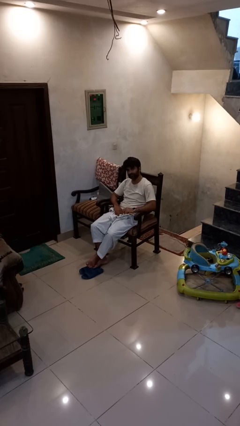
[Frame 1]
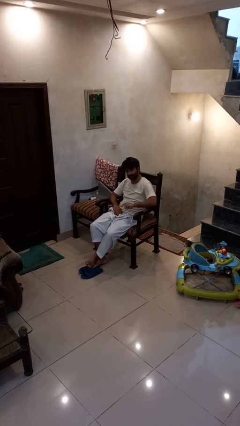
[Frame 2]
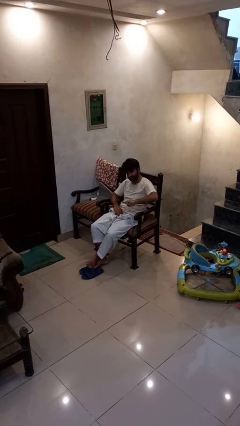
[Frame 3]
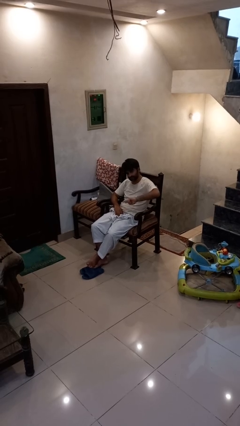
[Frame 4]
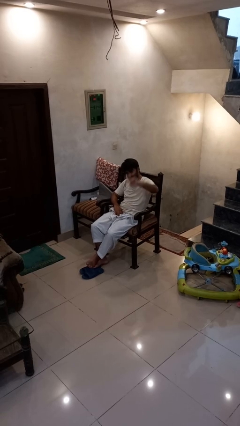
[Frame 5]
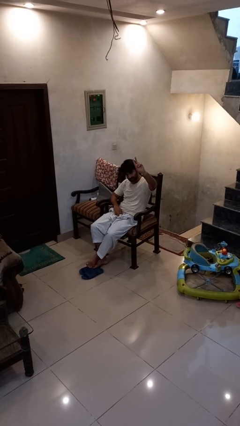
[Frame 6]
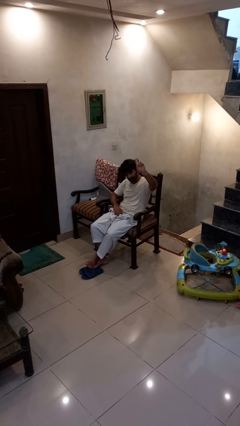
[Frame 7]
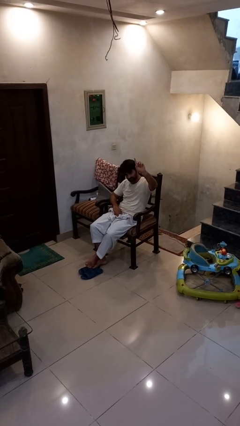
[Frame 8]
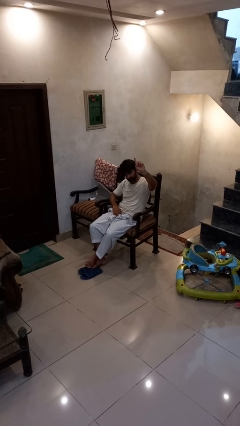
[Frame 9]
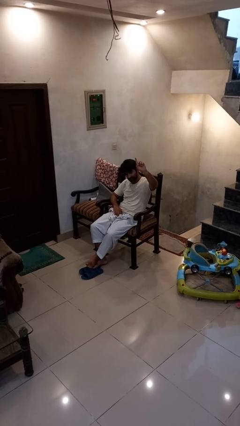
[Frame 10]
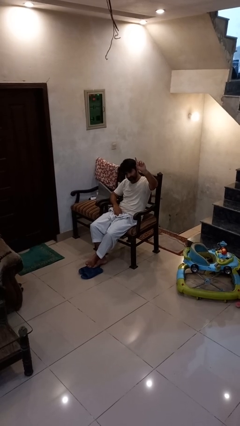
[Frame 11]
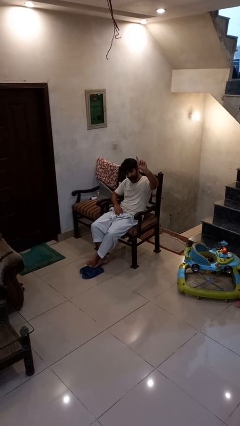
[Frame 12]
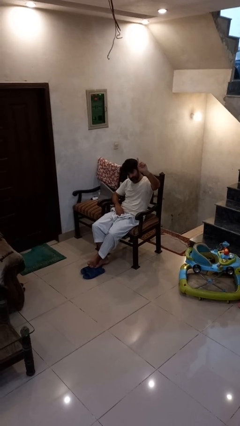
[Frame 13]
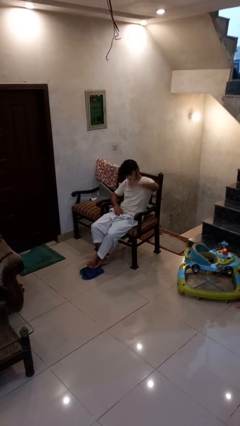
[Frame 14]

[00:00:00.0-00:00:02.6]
person gestures swipe up

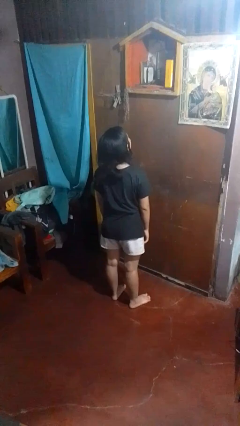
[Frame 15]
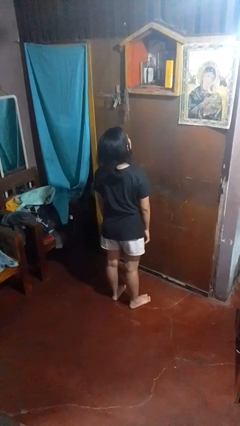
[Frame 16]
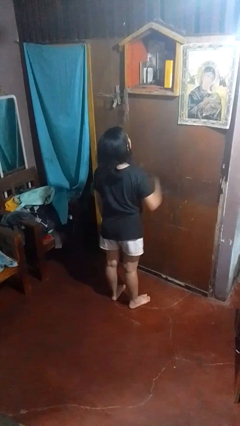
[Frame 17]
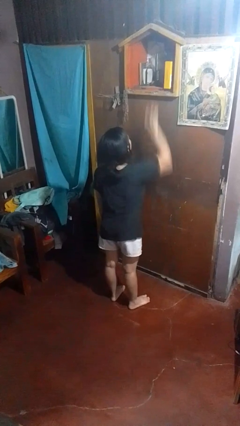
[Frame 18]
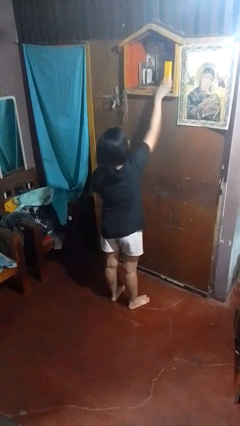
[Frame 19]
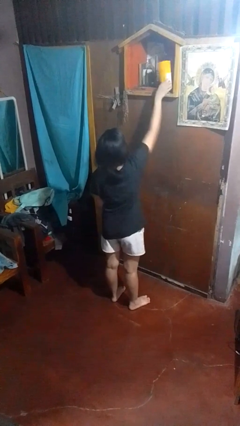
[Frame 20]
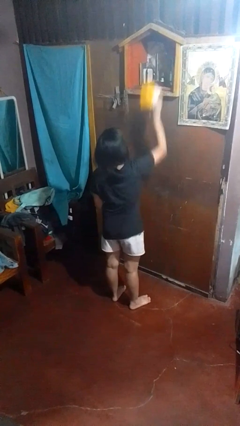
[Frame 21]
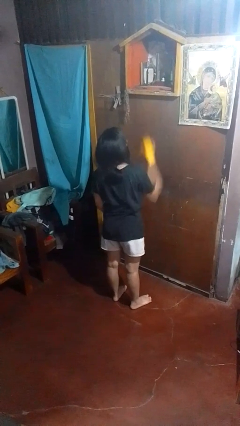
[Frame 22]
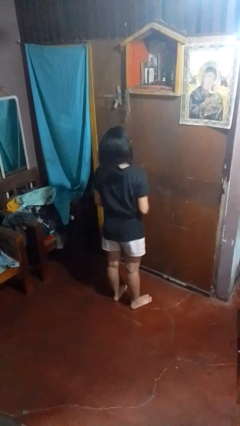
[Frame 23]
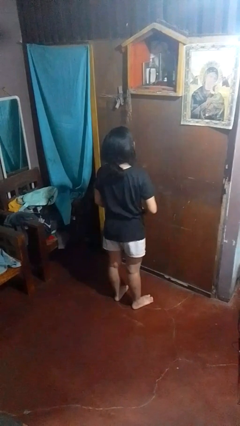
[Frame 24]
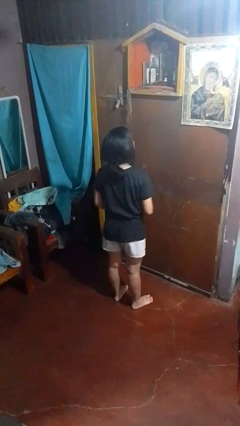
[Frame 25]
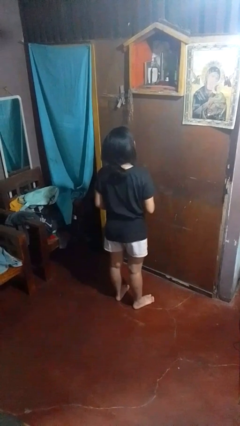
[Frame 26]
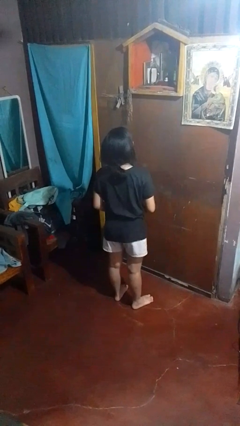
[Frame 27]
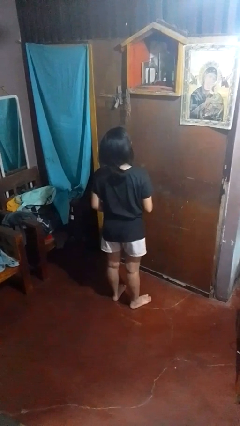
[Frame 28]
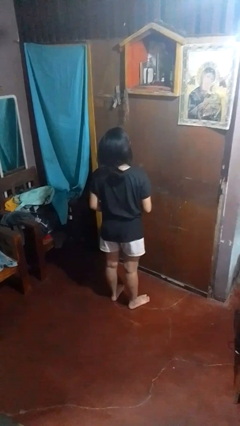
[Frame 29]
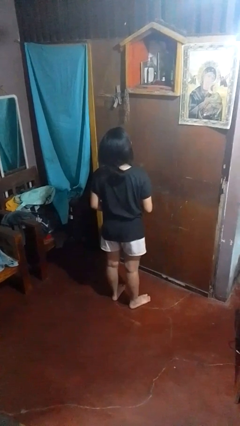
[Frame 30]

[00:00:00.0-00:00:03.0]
person picks up object from shelf

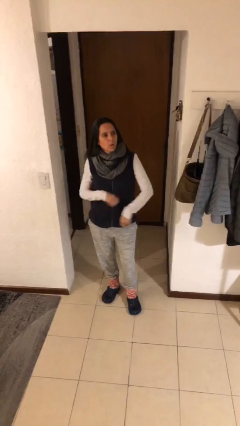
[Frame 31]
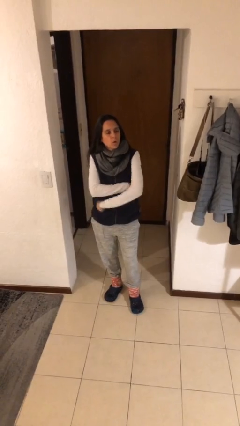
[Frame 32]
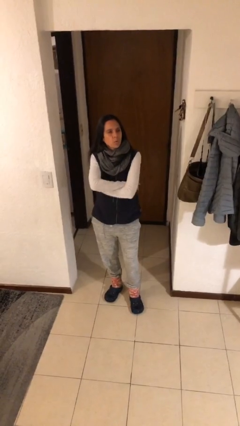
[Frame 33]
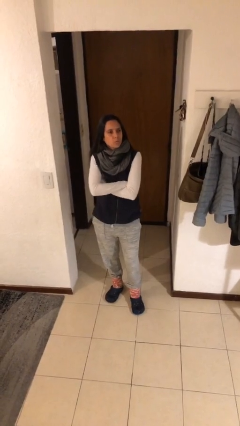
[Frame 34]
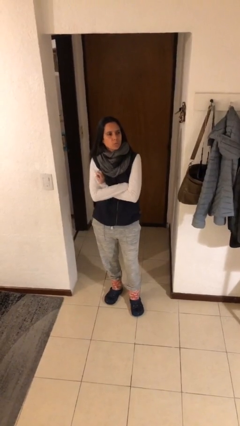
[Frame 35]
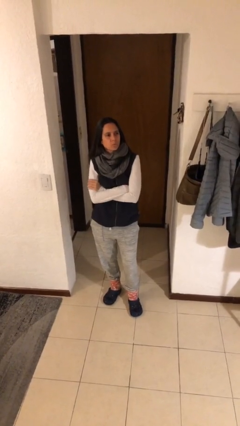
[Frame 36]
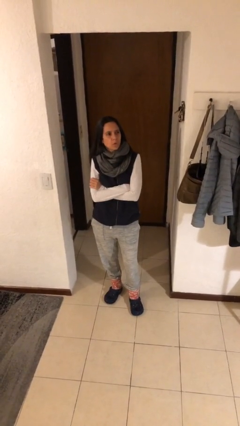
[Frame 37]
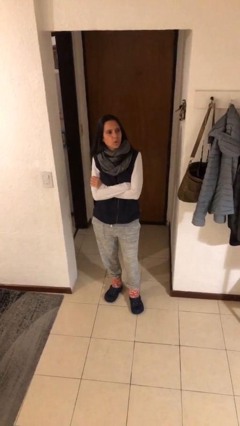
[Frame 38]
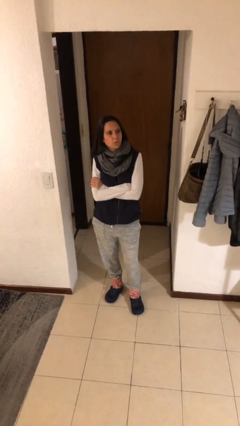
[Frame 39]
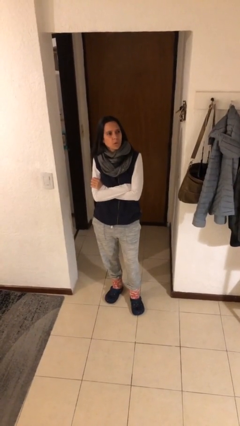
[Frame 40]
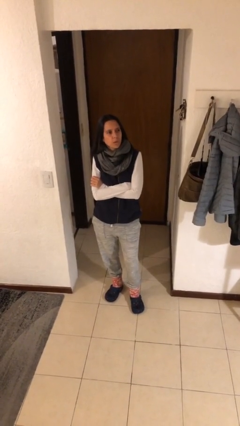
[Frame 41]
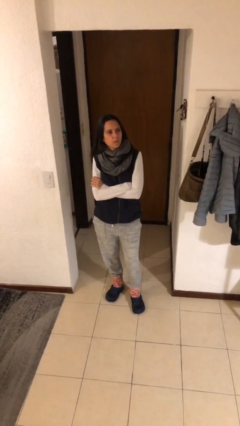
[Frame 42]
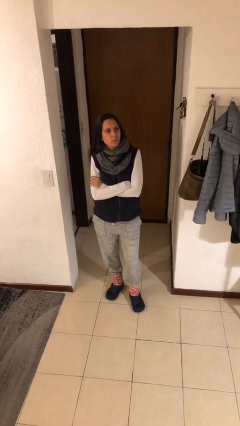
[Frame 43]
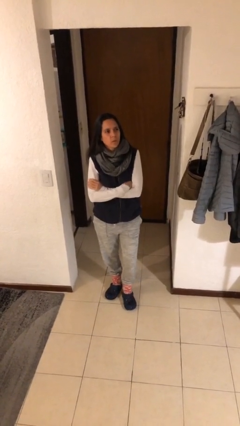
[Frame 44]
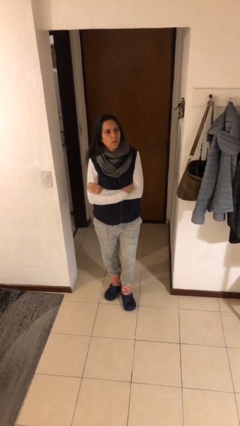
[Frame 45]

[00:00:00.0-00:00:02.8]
person crosses arms

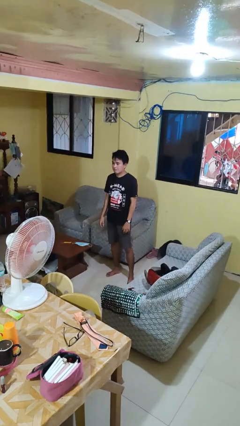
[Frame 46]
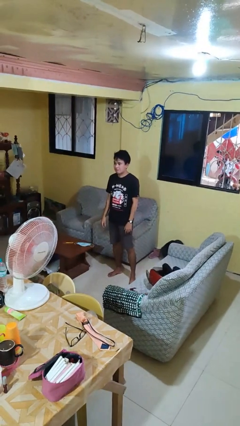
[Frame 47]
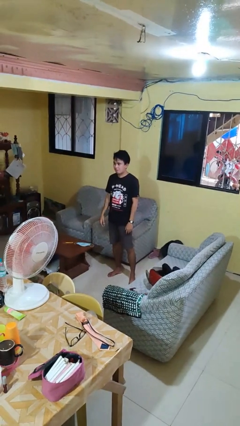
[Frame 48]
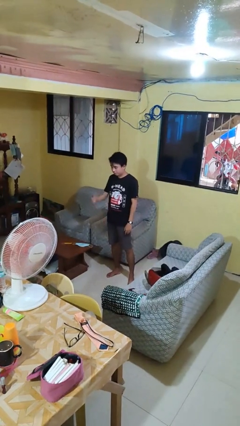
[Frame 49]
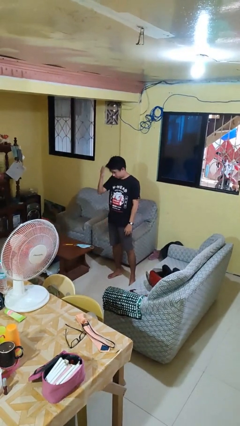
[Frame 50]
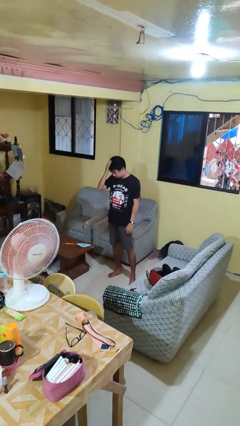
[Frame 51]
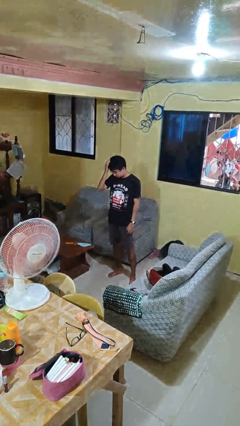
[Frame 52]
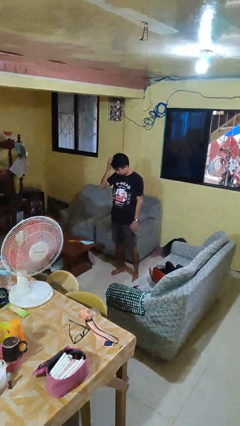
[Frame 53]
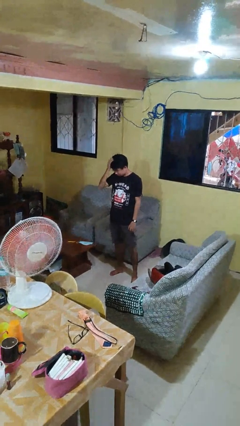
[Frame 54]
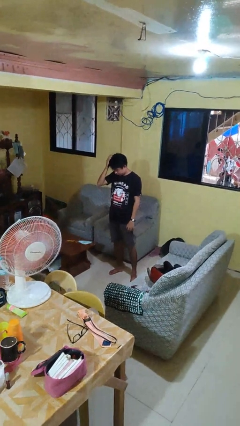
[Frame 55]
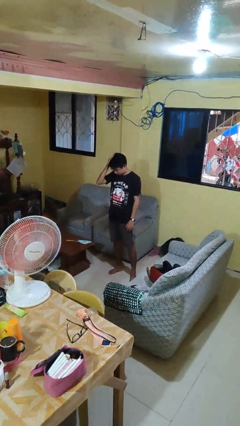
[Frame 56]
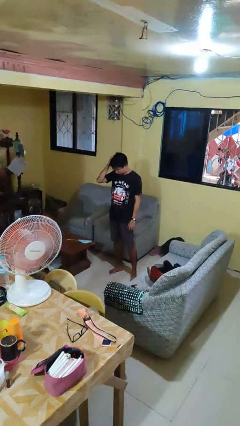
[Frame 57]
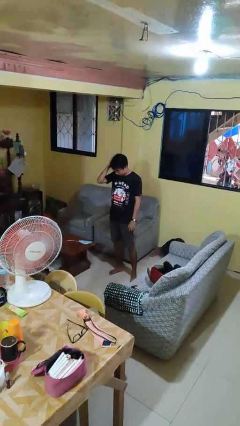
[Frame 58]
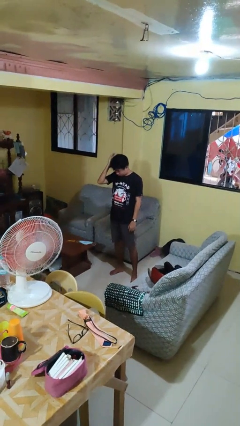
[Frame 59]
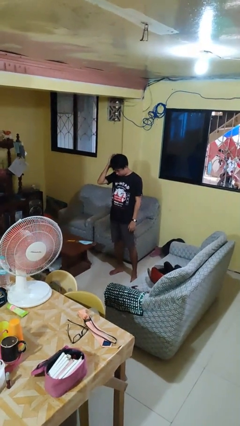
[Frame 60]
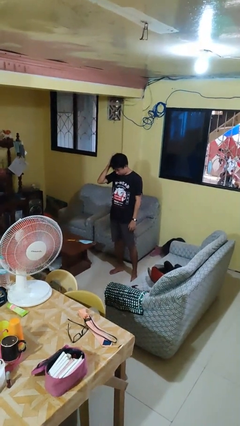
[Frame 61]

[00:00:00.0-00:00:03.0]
person pats head

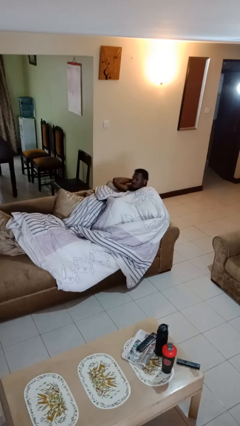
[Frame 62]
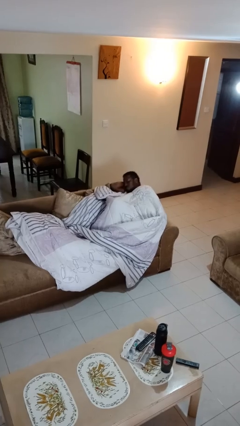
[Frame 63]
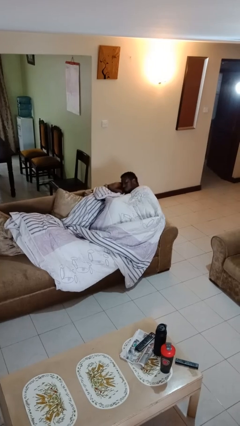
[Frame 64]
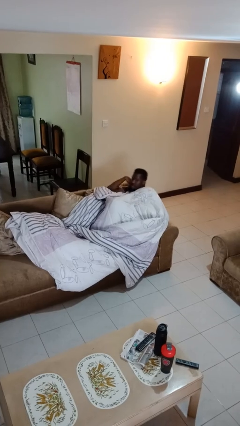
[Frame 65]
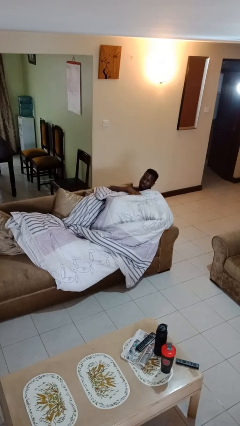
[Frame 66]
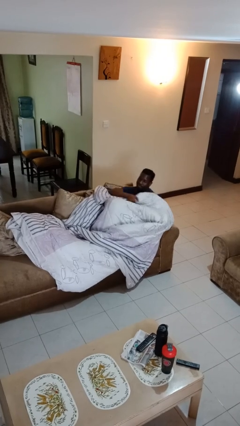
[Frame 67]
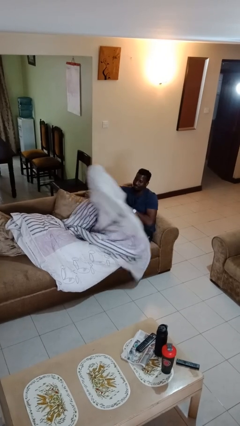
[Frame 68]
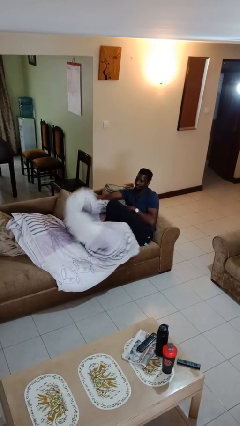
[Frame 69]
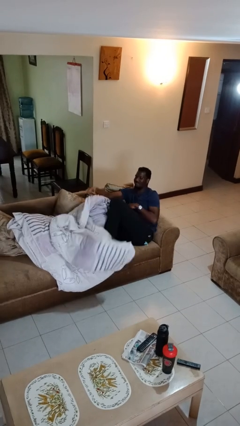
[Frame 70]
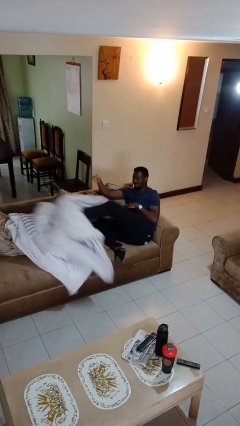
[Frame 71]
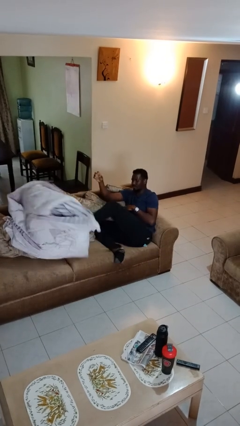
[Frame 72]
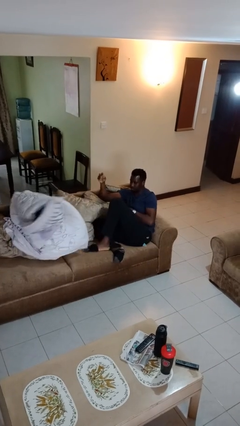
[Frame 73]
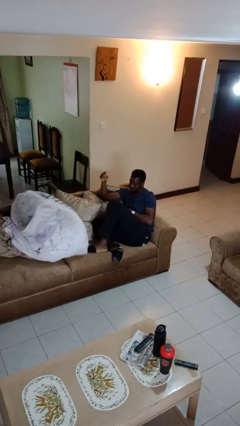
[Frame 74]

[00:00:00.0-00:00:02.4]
person uncovers with blanket

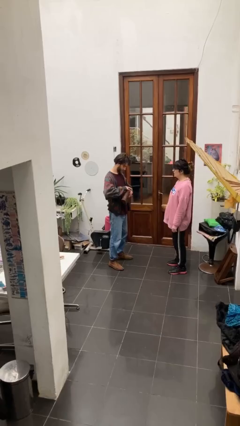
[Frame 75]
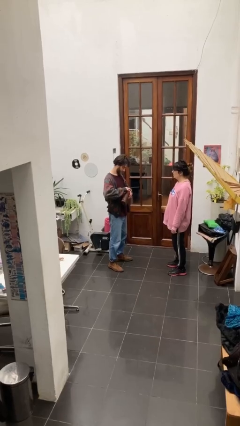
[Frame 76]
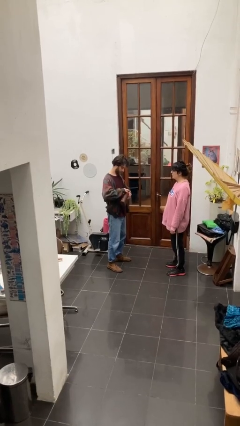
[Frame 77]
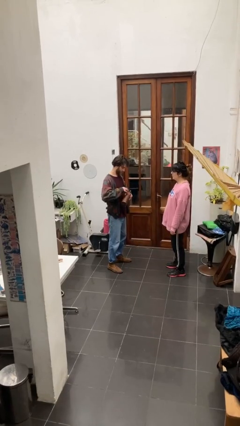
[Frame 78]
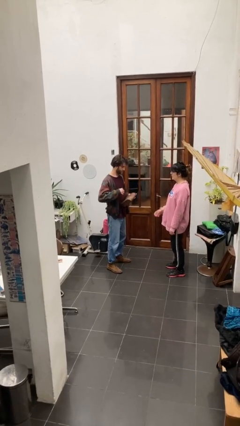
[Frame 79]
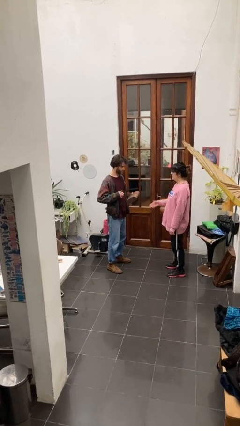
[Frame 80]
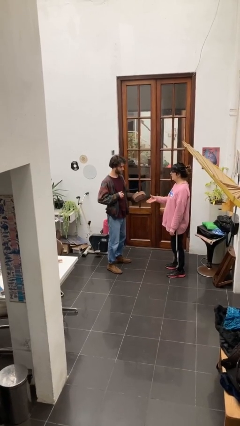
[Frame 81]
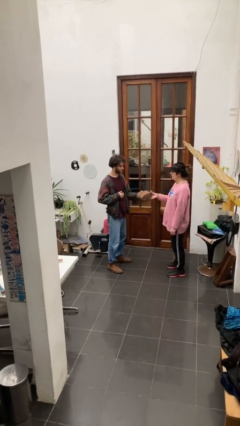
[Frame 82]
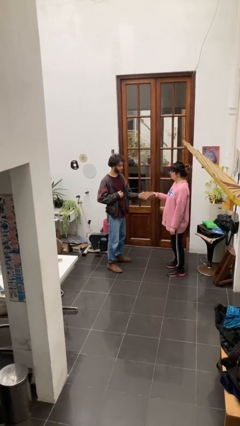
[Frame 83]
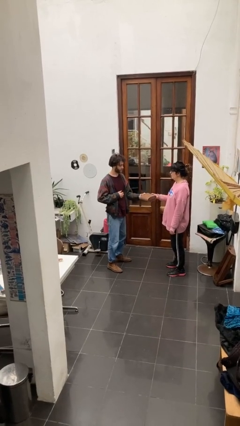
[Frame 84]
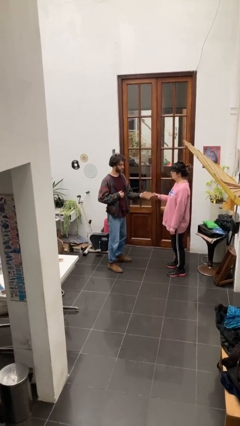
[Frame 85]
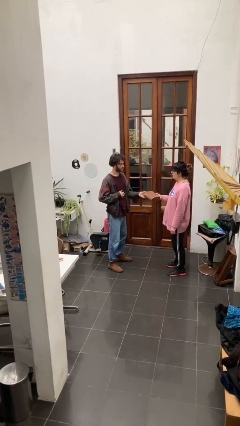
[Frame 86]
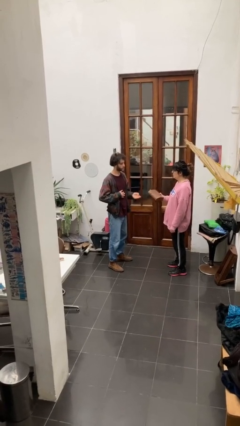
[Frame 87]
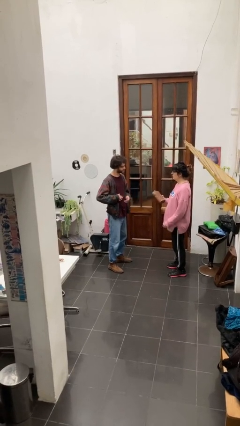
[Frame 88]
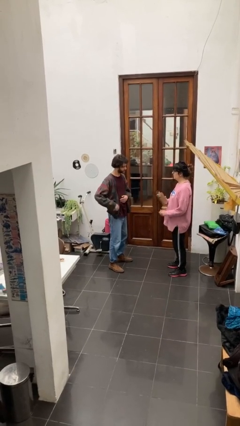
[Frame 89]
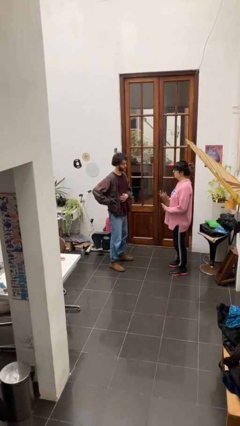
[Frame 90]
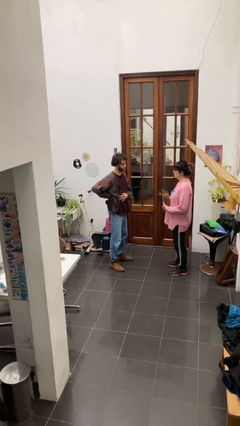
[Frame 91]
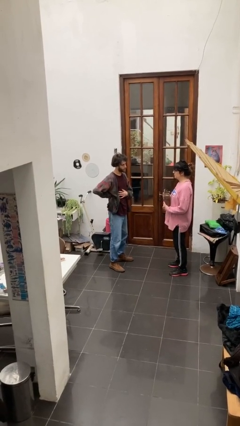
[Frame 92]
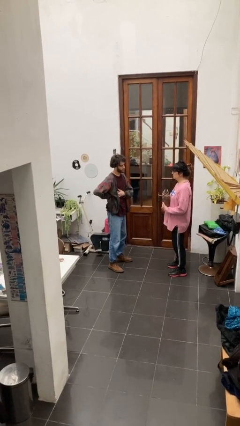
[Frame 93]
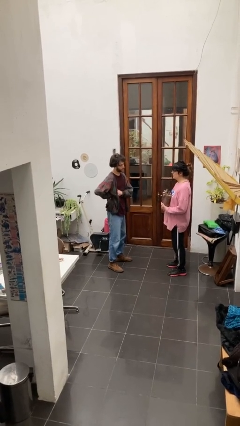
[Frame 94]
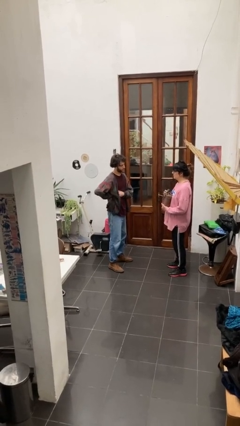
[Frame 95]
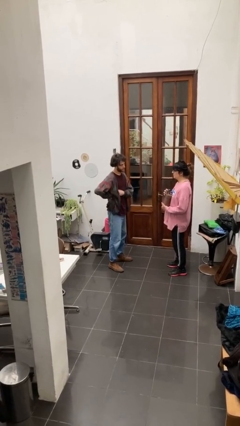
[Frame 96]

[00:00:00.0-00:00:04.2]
person transfers object to person
